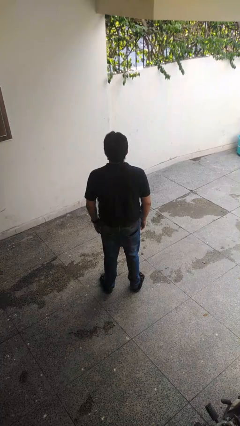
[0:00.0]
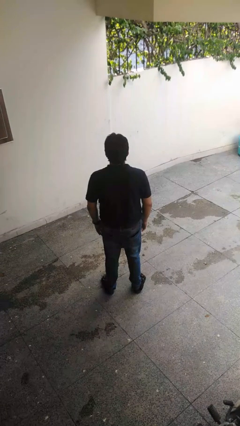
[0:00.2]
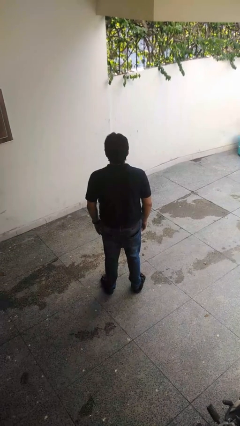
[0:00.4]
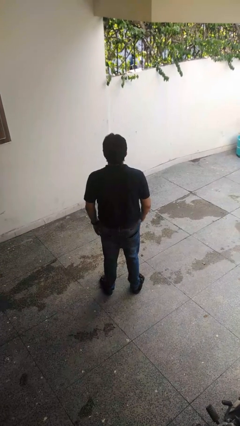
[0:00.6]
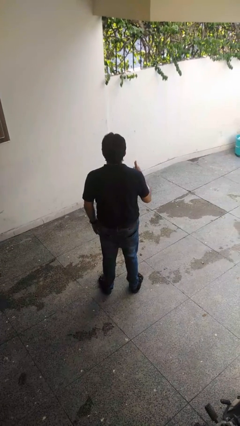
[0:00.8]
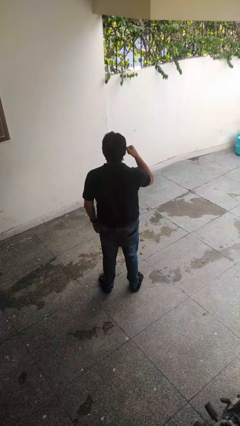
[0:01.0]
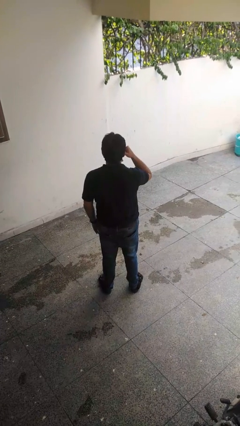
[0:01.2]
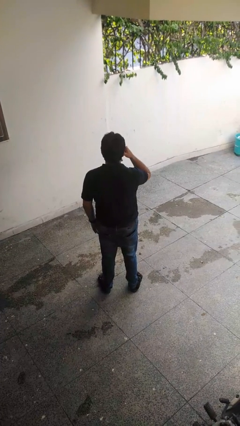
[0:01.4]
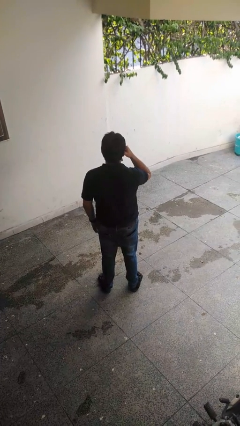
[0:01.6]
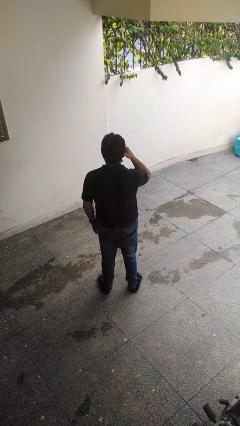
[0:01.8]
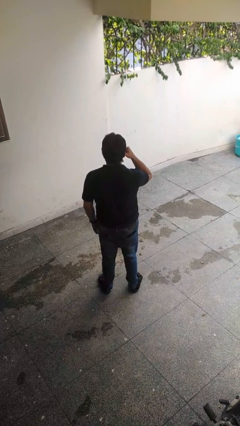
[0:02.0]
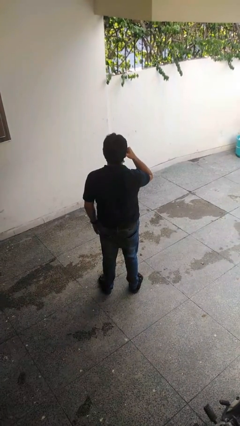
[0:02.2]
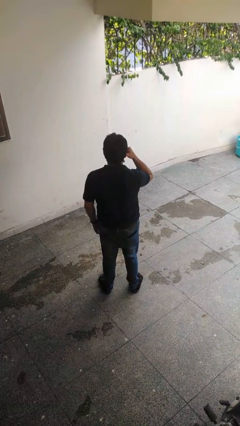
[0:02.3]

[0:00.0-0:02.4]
person gestures call me

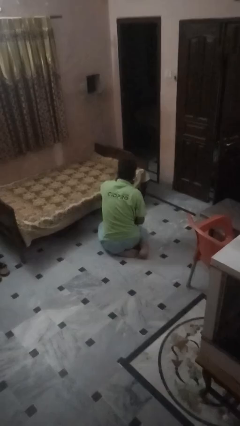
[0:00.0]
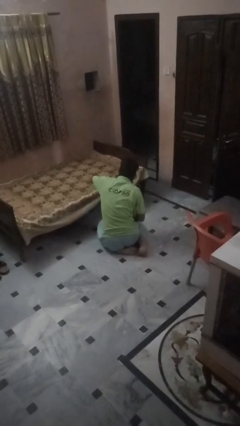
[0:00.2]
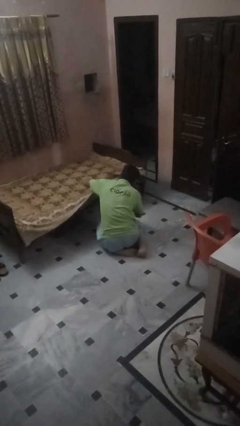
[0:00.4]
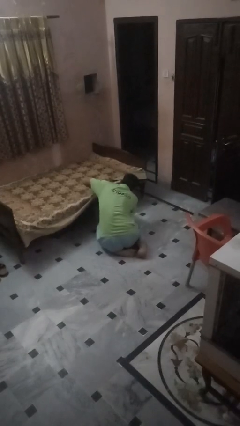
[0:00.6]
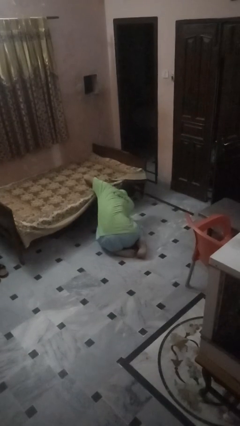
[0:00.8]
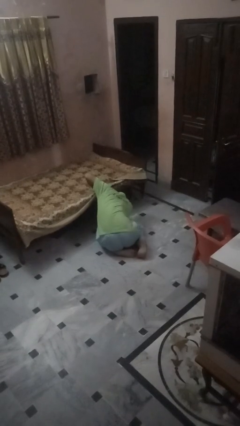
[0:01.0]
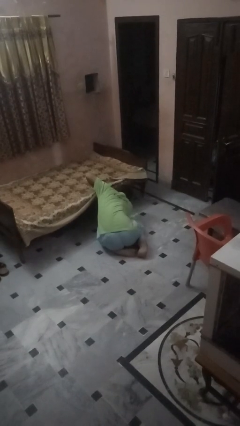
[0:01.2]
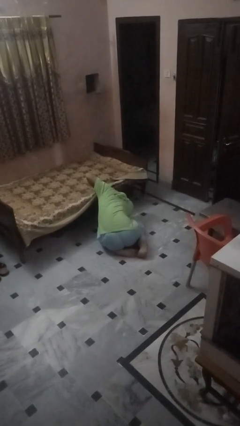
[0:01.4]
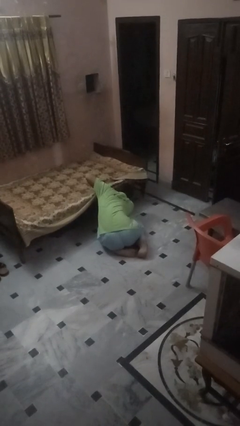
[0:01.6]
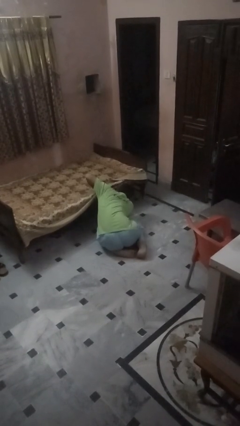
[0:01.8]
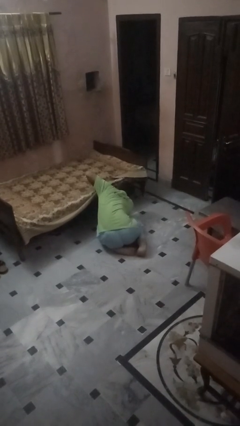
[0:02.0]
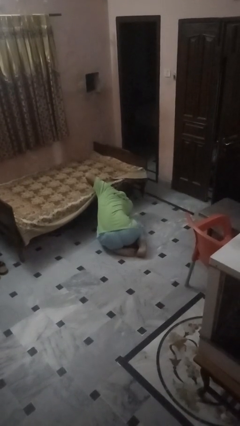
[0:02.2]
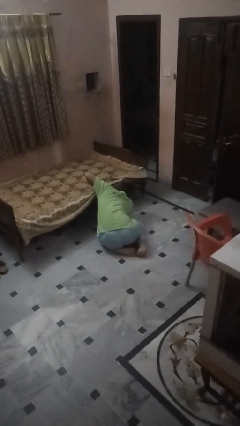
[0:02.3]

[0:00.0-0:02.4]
person searches under bed

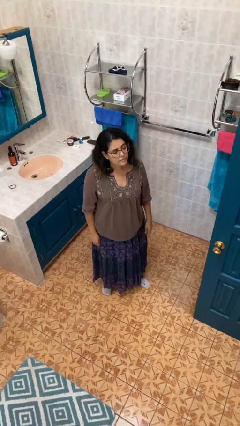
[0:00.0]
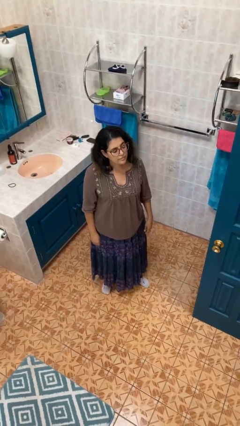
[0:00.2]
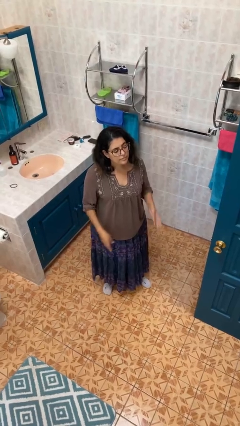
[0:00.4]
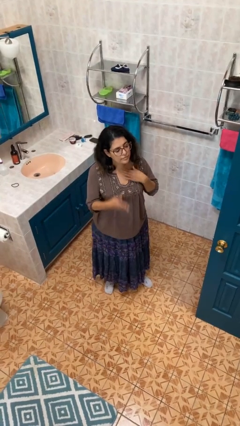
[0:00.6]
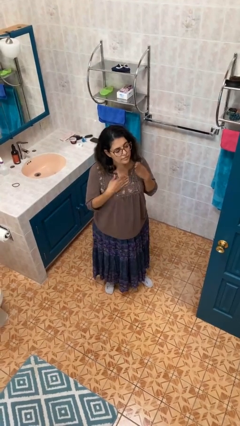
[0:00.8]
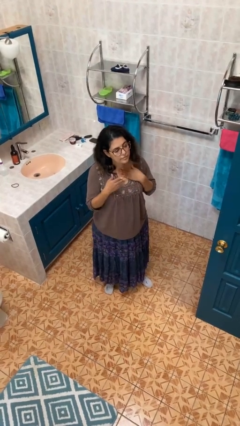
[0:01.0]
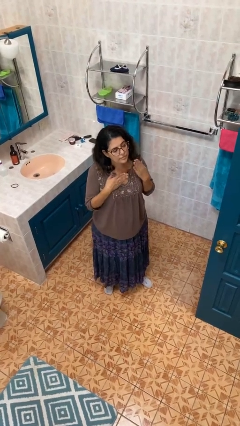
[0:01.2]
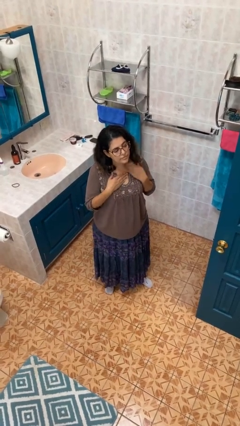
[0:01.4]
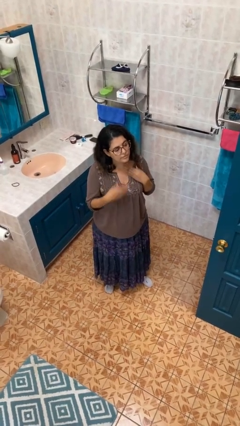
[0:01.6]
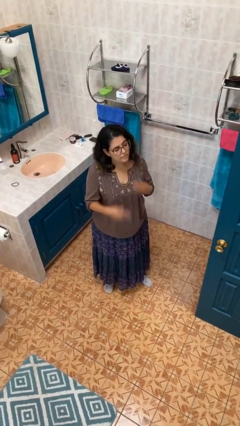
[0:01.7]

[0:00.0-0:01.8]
person drums on chest

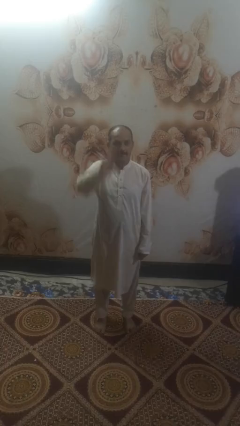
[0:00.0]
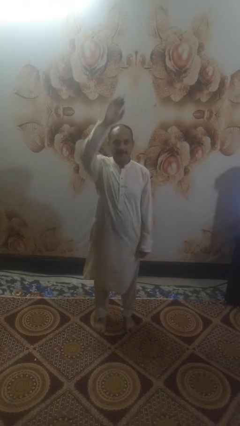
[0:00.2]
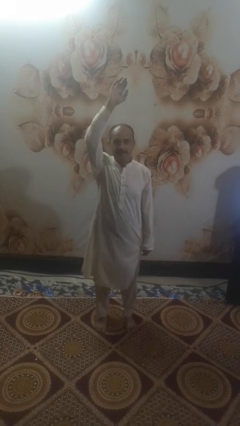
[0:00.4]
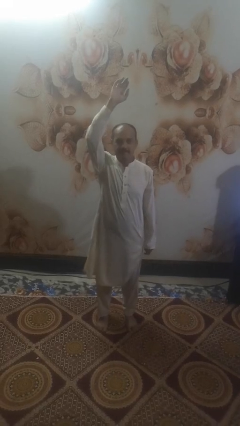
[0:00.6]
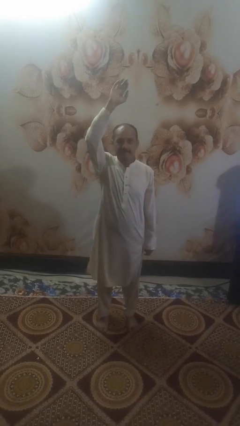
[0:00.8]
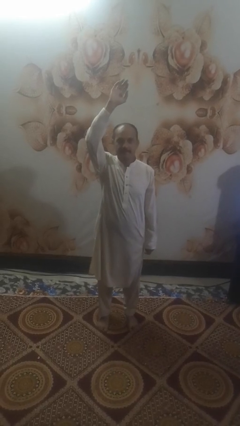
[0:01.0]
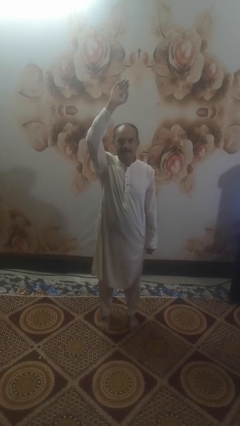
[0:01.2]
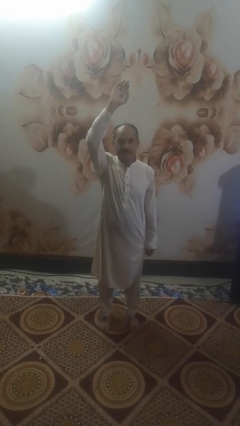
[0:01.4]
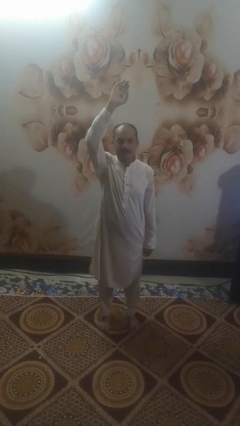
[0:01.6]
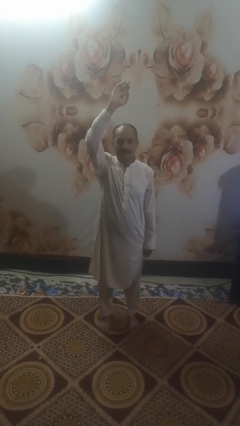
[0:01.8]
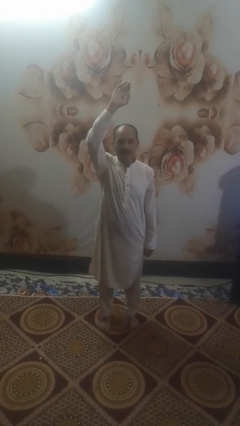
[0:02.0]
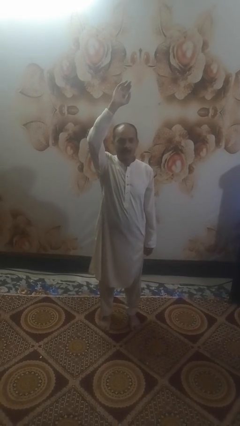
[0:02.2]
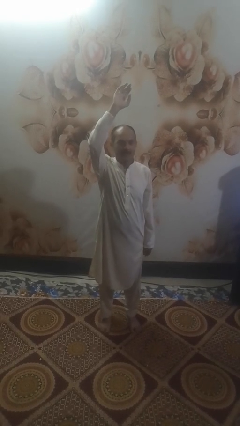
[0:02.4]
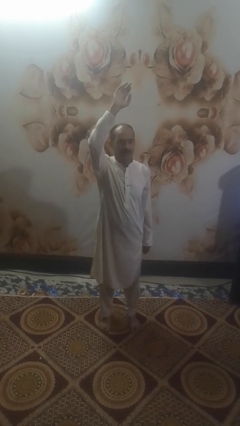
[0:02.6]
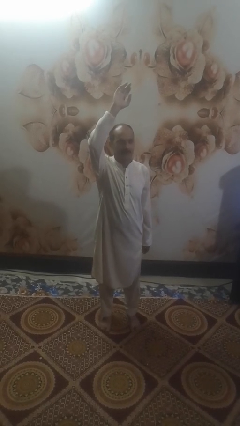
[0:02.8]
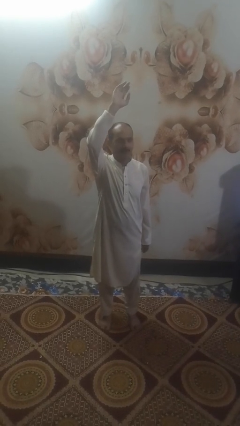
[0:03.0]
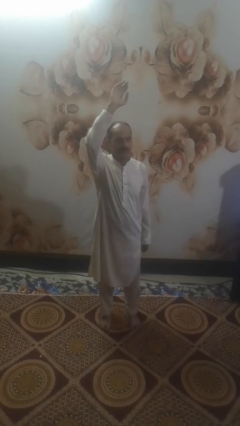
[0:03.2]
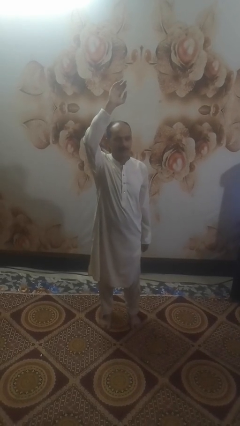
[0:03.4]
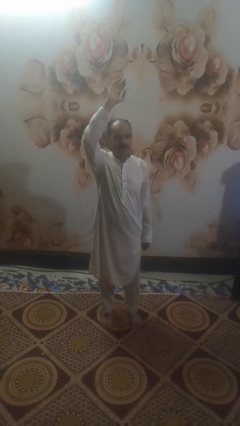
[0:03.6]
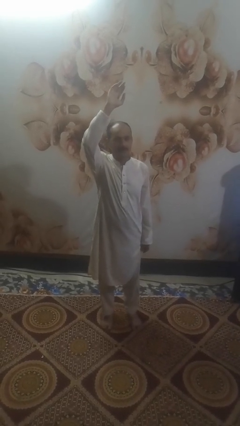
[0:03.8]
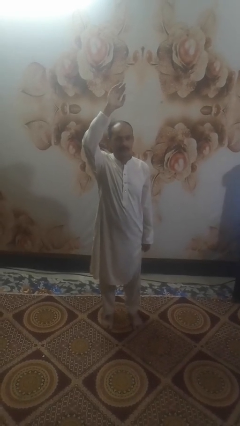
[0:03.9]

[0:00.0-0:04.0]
person gestures raise hand

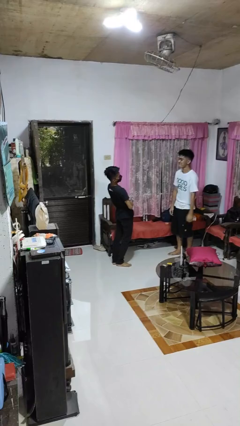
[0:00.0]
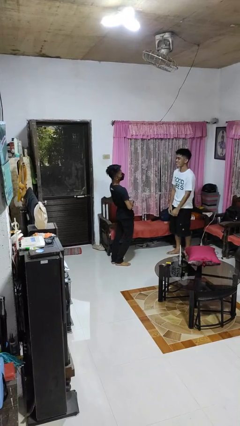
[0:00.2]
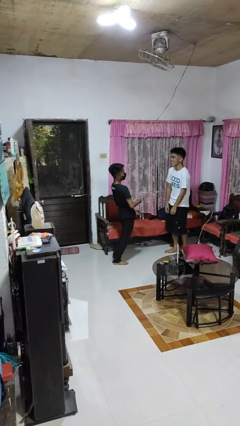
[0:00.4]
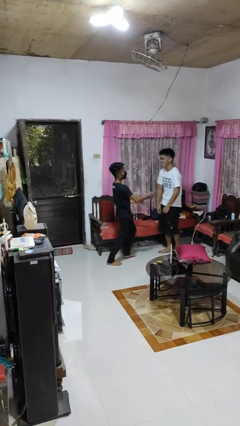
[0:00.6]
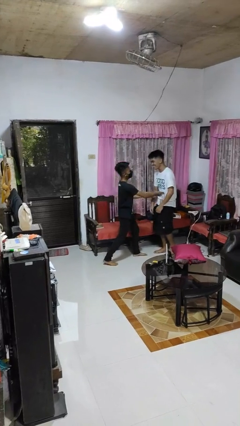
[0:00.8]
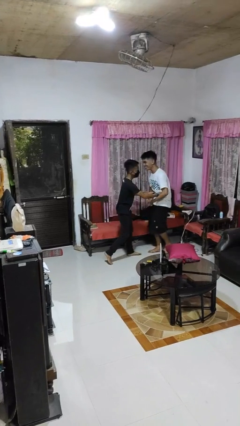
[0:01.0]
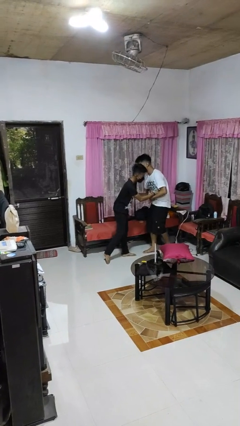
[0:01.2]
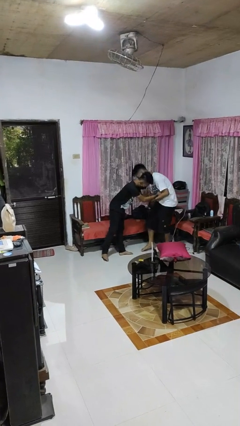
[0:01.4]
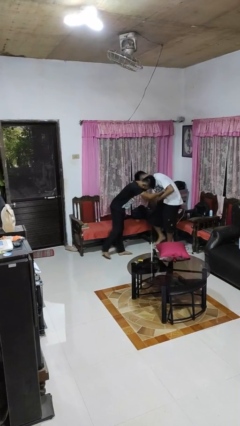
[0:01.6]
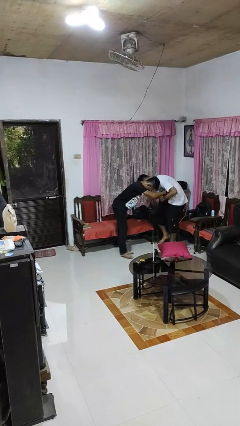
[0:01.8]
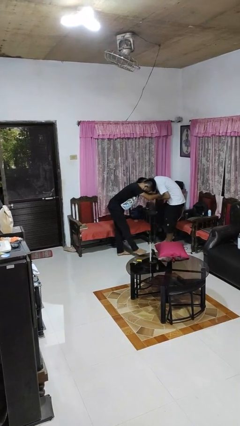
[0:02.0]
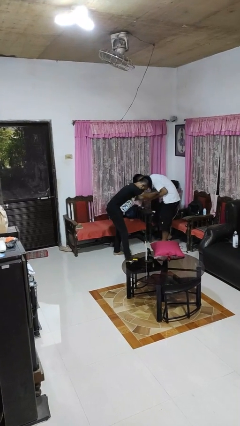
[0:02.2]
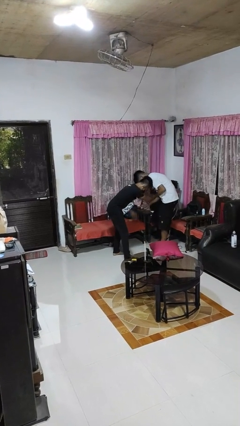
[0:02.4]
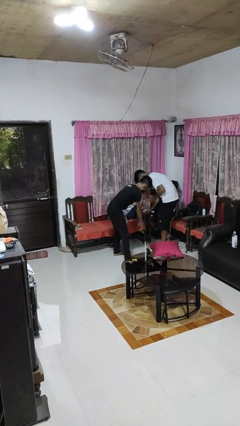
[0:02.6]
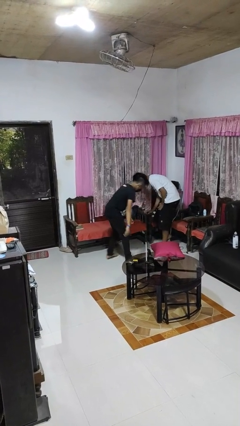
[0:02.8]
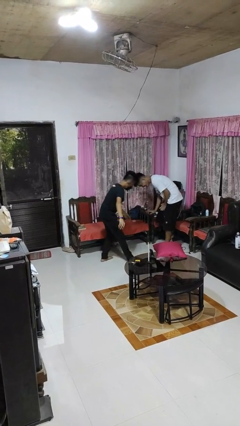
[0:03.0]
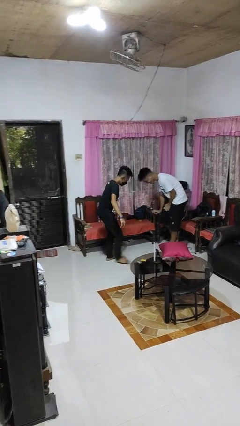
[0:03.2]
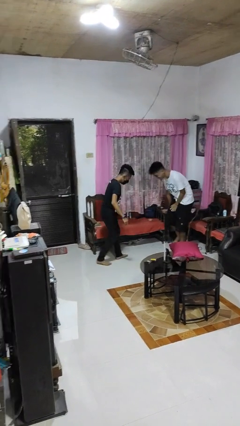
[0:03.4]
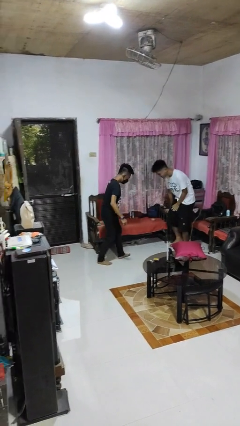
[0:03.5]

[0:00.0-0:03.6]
person tickles person

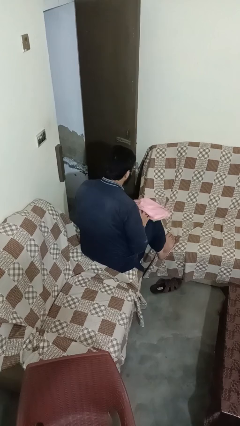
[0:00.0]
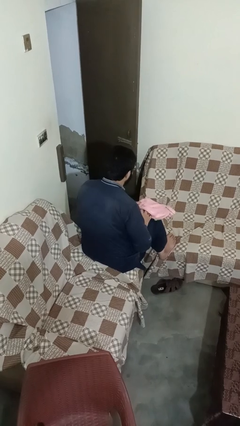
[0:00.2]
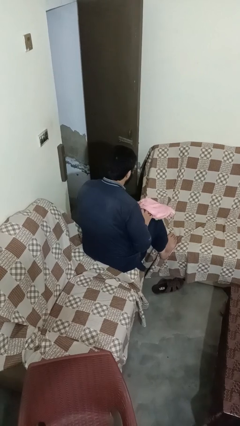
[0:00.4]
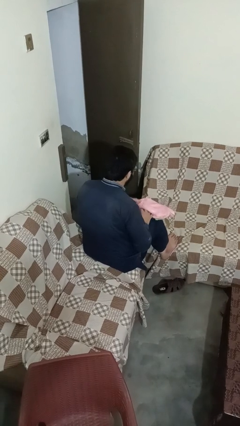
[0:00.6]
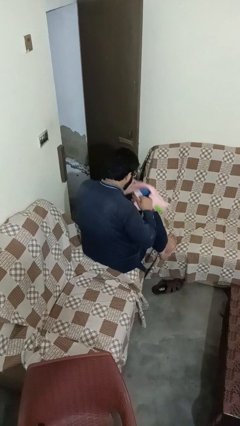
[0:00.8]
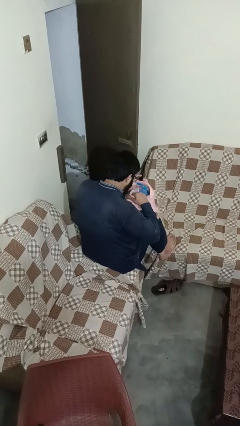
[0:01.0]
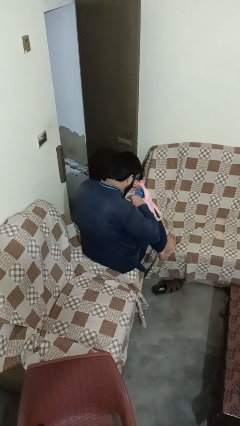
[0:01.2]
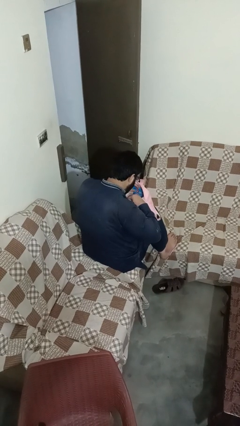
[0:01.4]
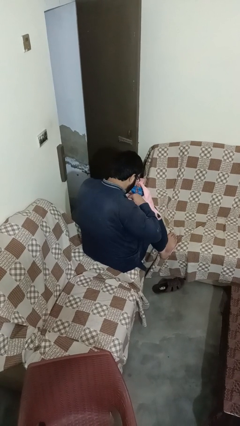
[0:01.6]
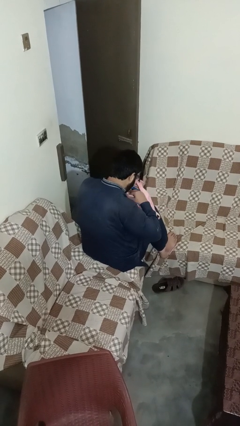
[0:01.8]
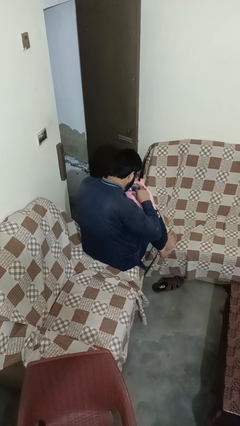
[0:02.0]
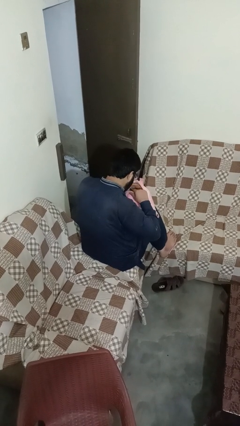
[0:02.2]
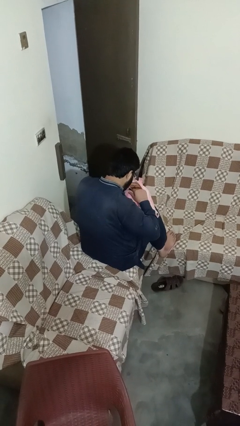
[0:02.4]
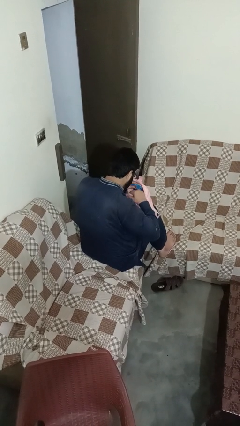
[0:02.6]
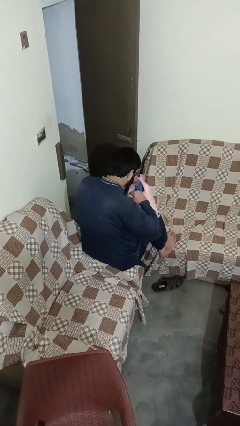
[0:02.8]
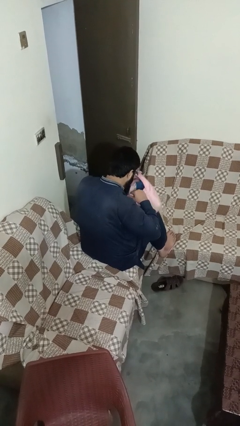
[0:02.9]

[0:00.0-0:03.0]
person searches in bag
